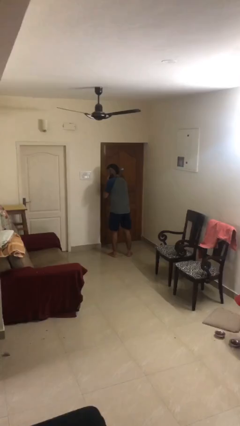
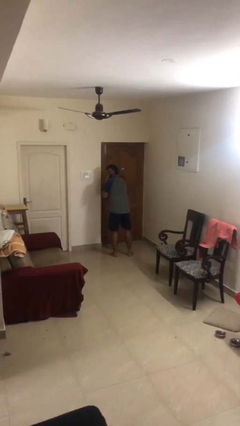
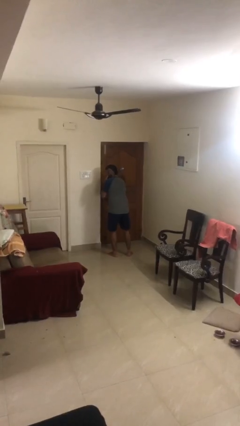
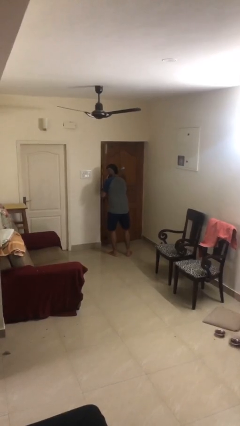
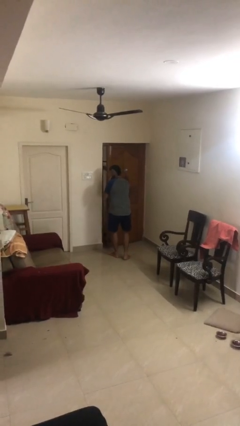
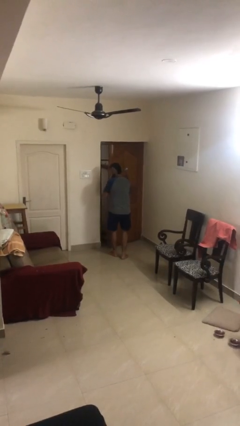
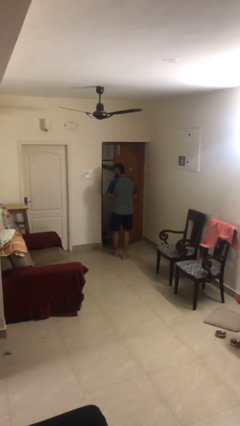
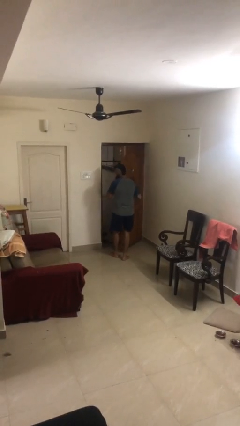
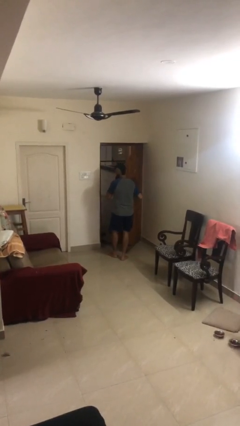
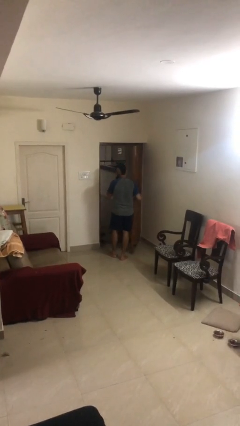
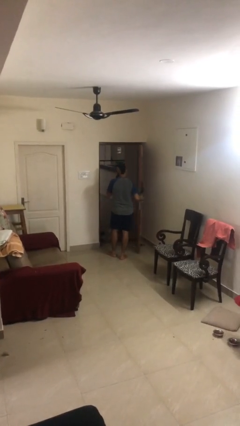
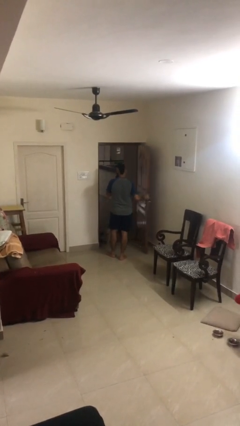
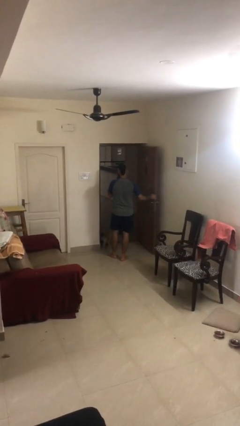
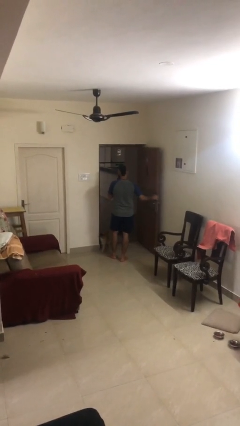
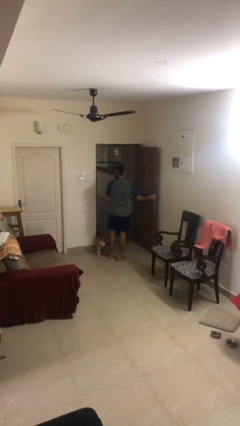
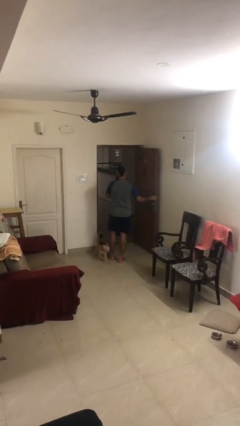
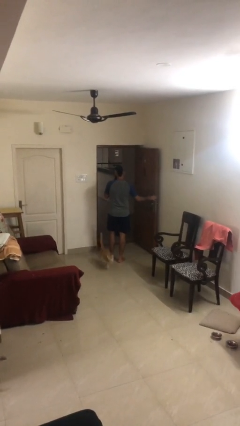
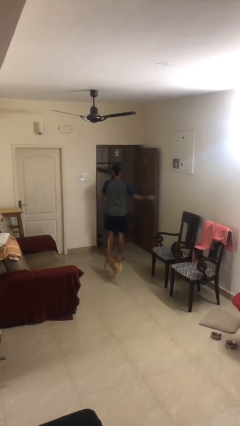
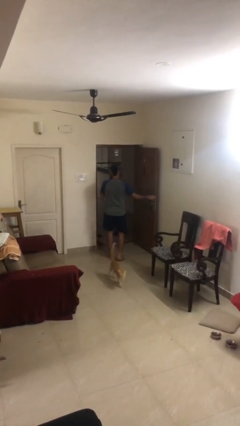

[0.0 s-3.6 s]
person opens facility door

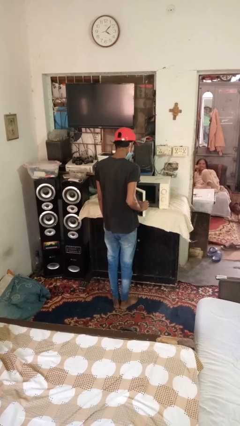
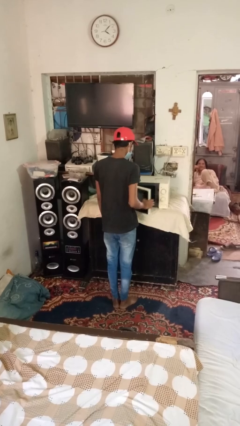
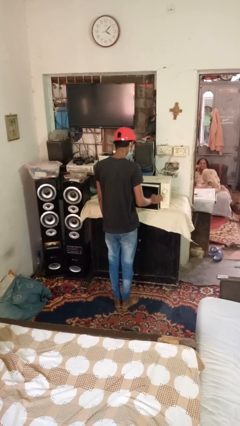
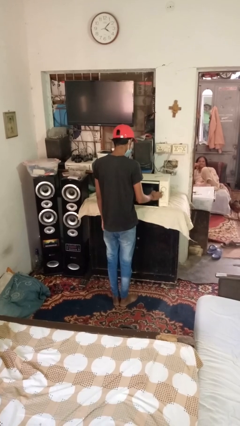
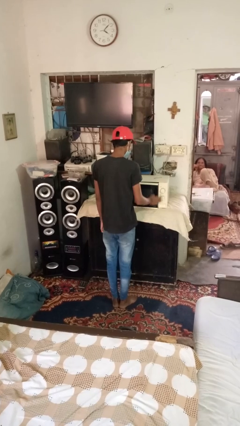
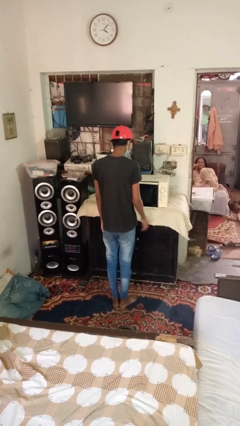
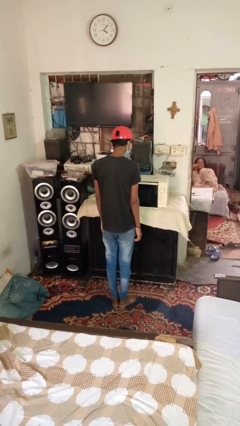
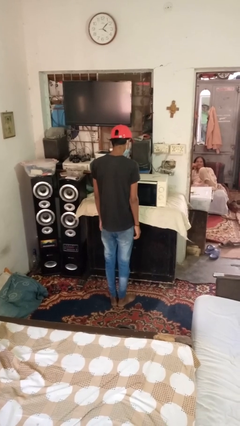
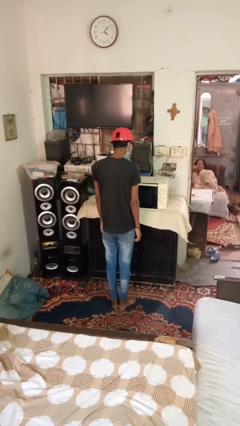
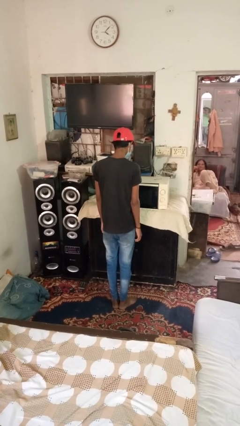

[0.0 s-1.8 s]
person closes dishwasher

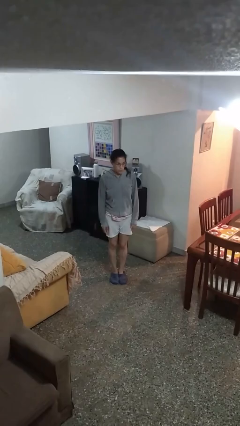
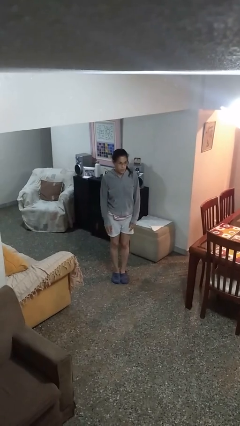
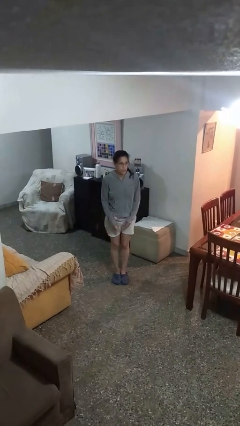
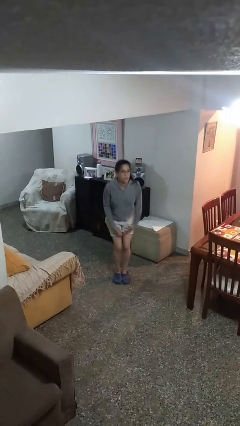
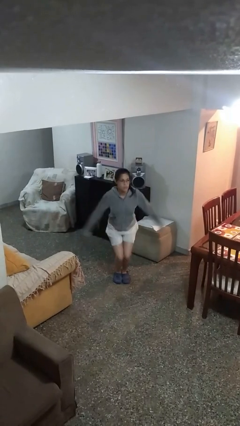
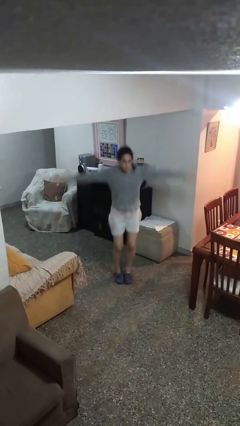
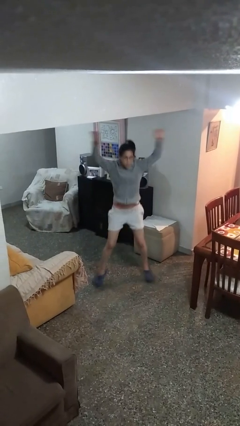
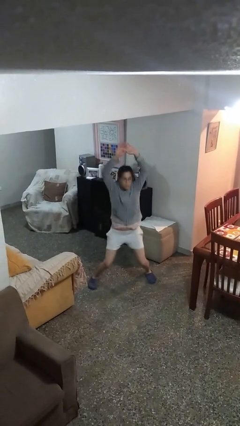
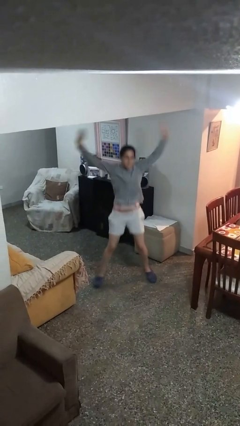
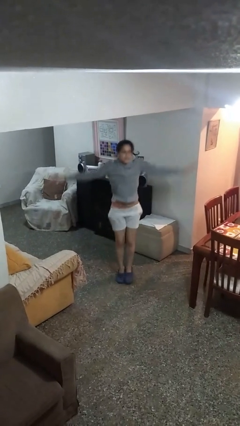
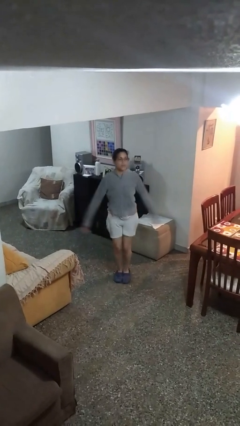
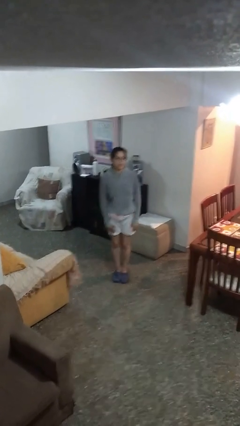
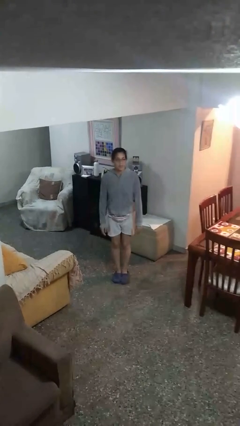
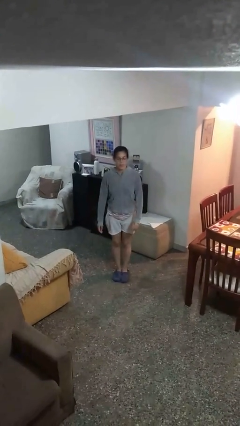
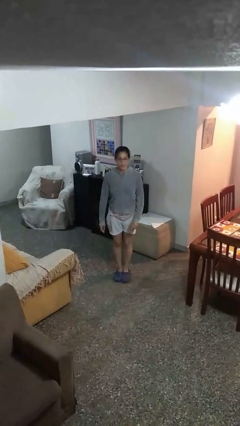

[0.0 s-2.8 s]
person exercises with jumping jacks

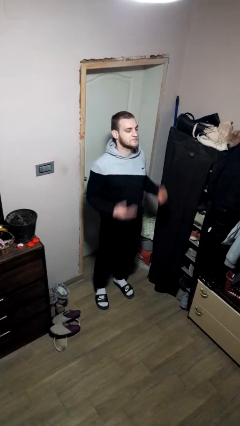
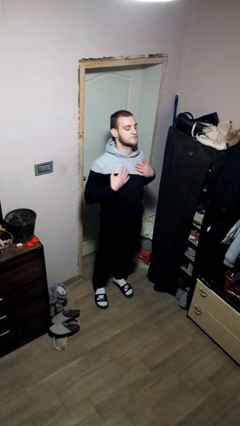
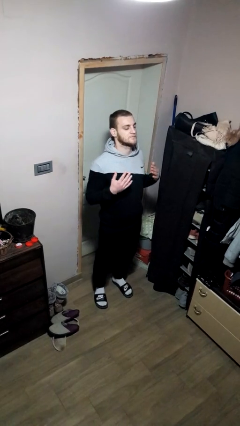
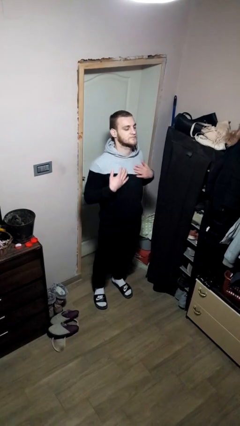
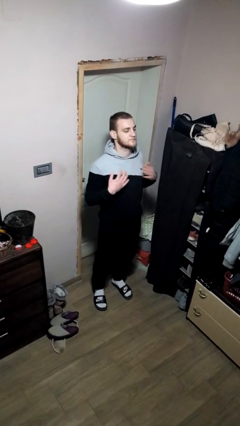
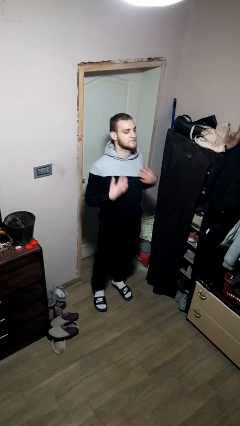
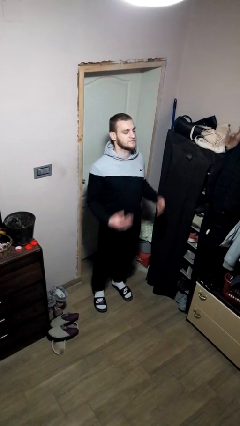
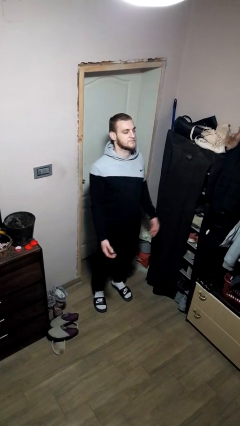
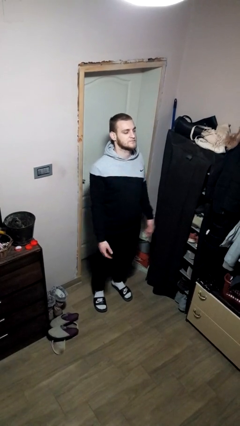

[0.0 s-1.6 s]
person drums on chest

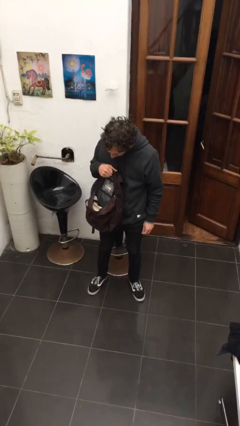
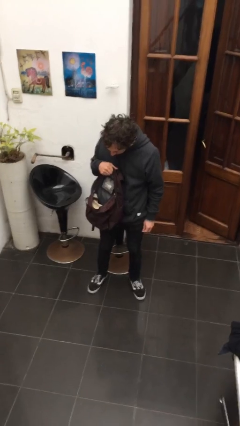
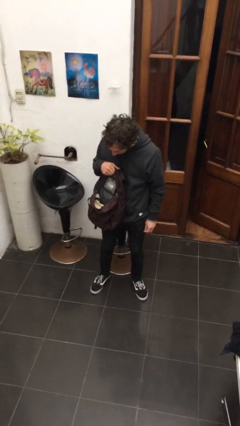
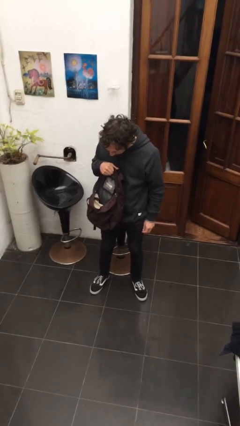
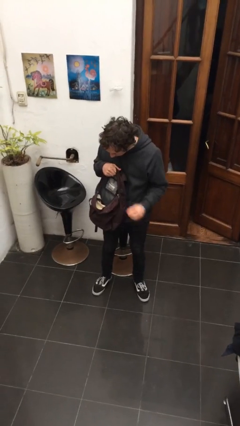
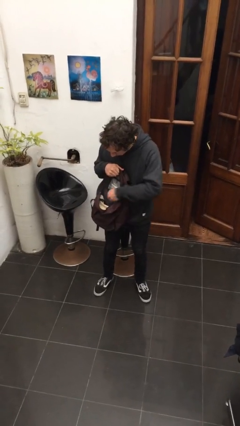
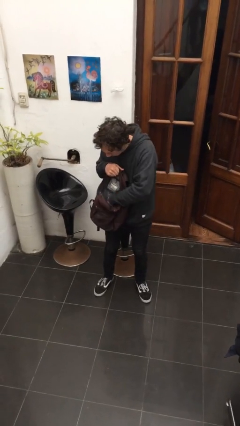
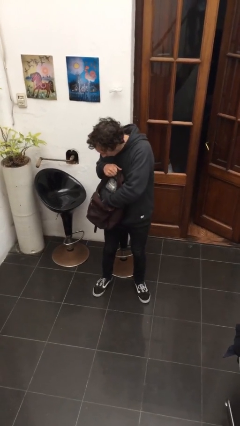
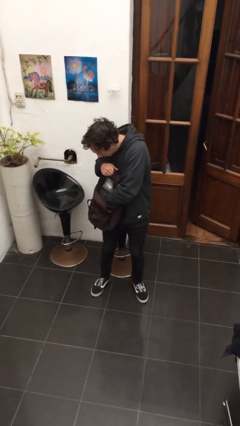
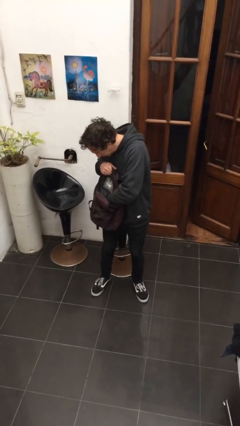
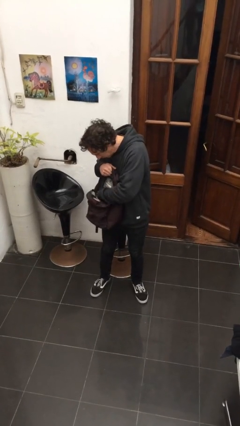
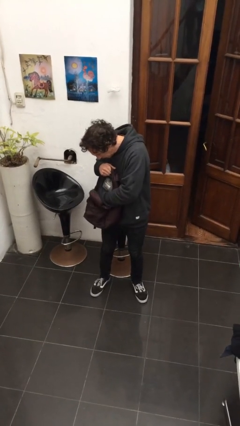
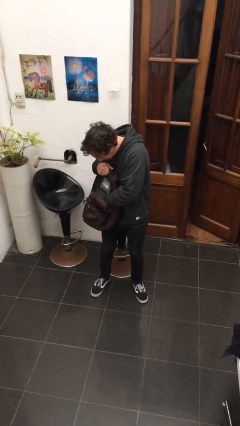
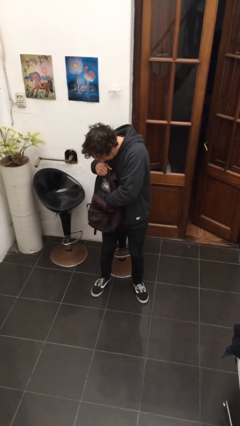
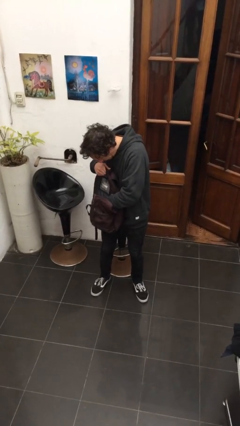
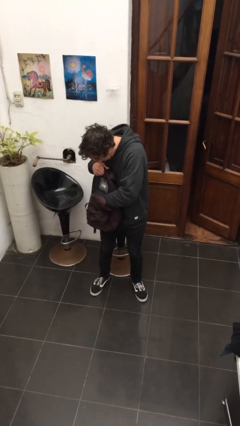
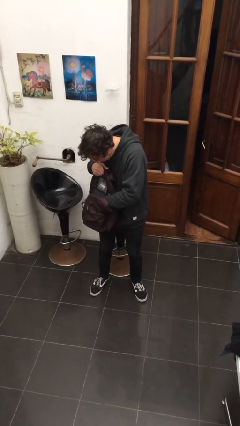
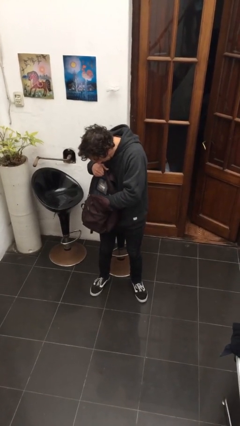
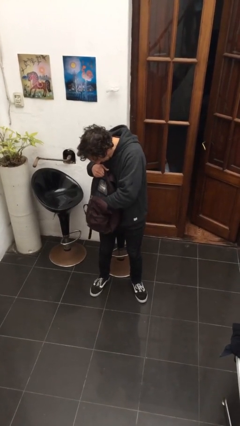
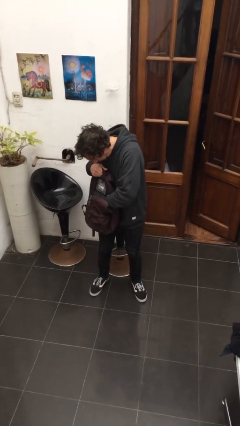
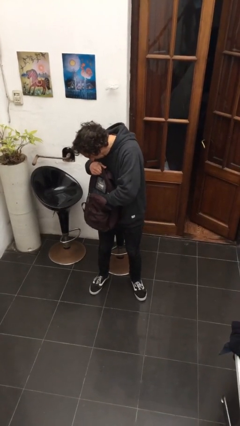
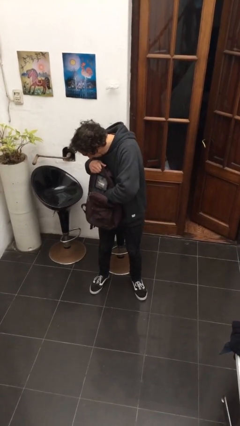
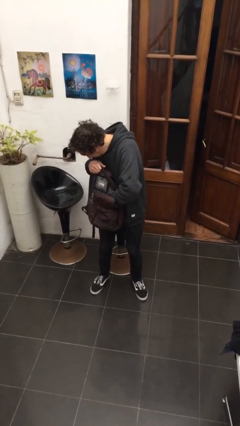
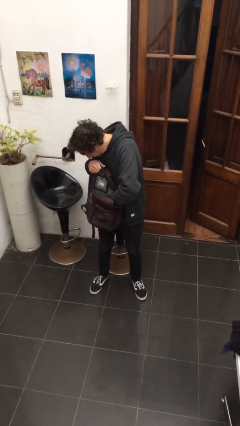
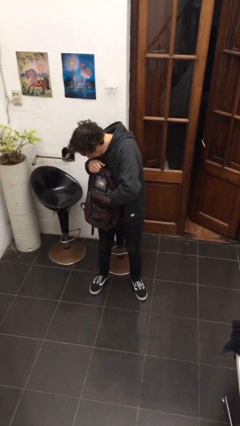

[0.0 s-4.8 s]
person searches in backpack

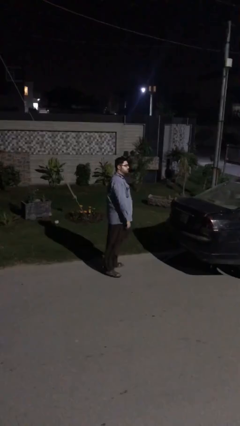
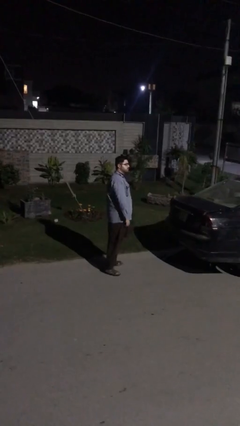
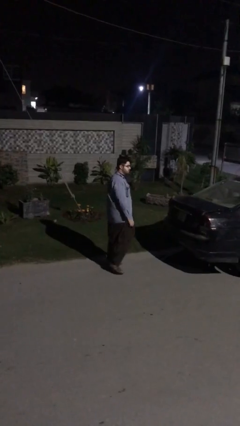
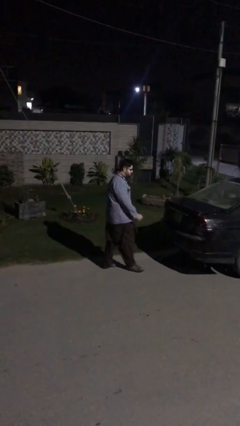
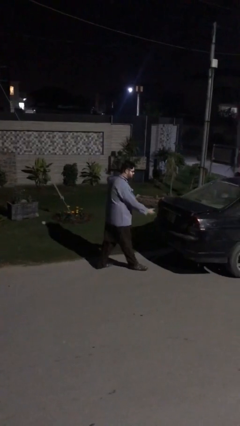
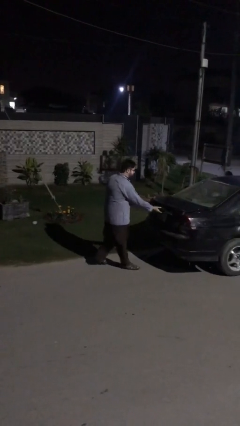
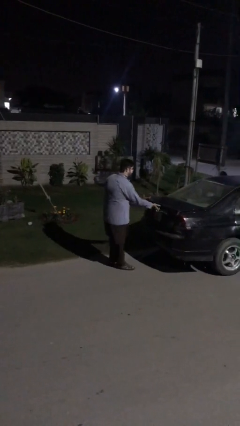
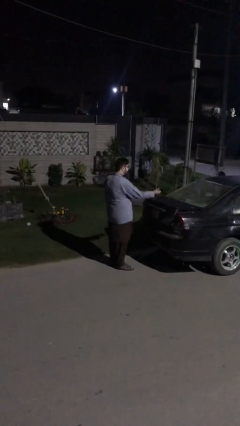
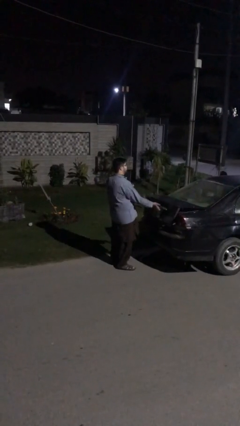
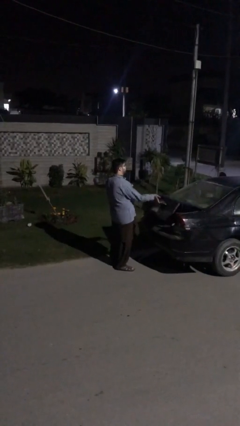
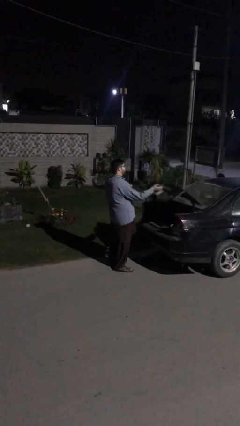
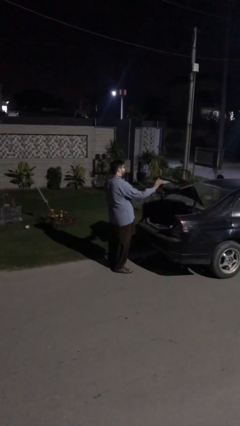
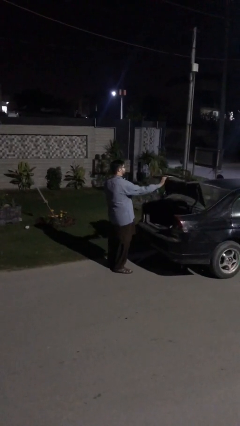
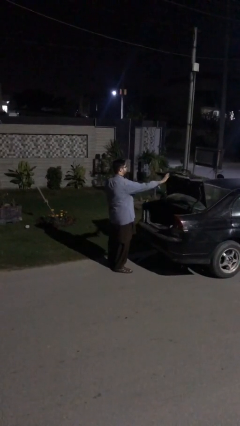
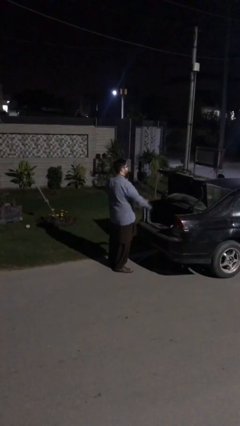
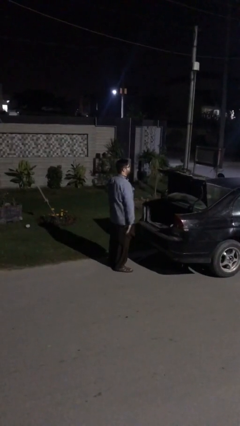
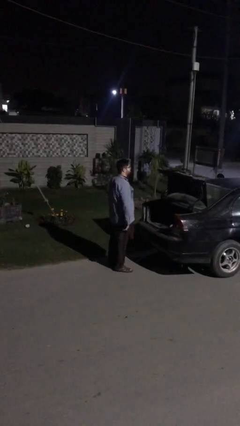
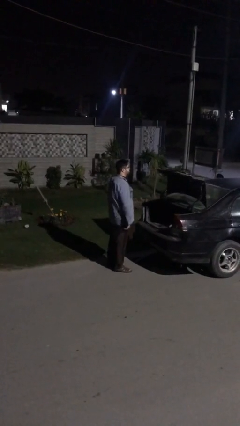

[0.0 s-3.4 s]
person opens car trunk
